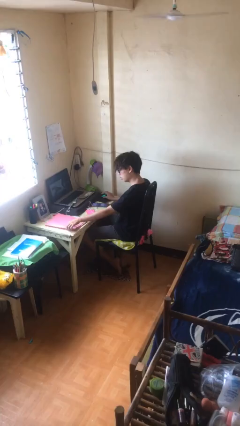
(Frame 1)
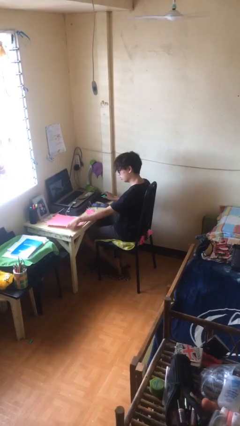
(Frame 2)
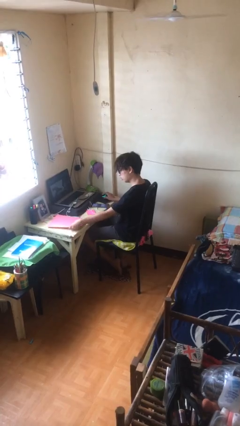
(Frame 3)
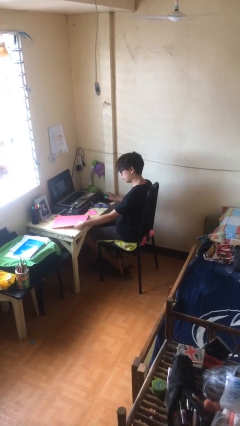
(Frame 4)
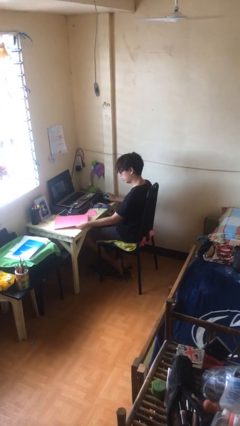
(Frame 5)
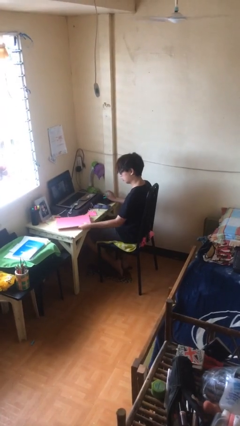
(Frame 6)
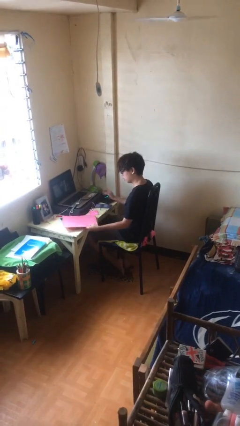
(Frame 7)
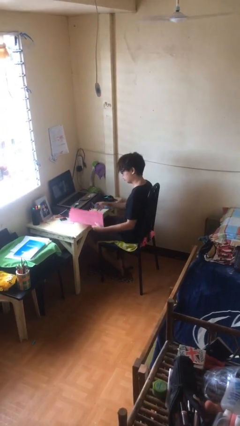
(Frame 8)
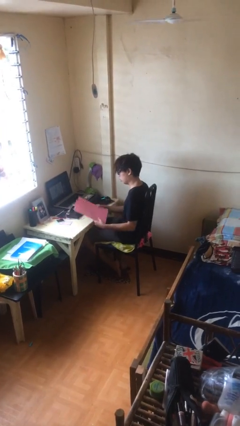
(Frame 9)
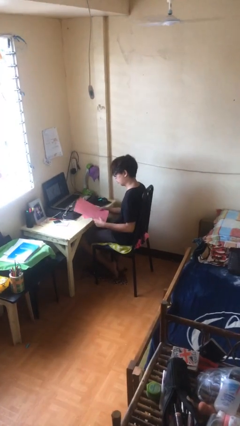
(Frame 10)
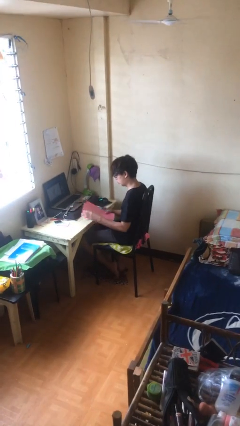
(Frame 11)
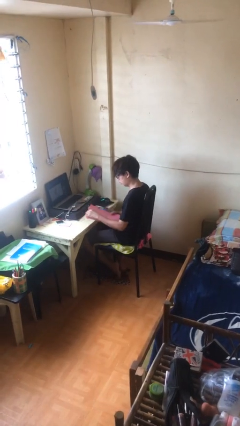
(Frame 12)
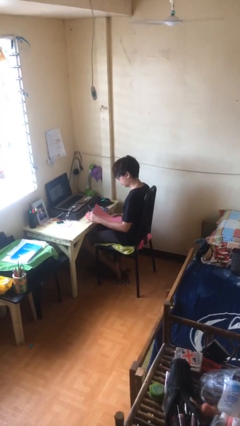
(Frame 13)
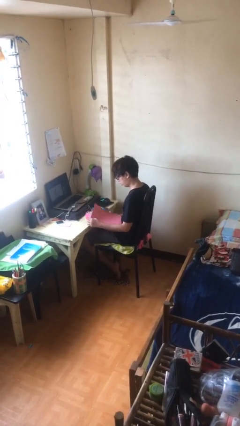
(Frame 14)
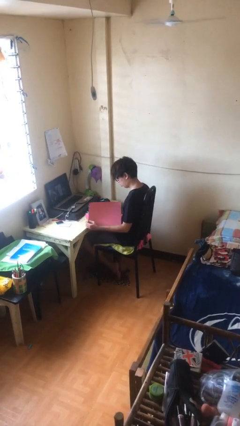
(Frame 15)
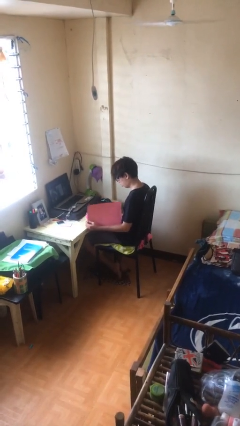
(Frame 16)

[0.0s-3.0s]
person picks up object from table

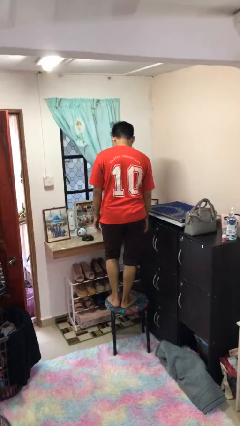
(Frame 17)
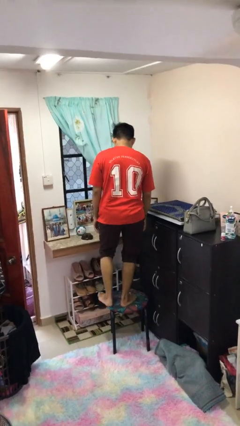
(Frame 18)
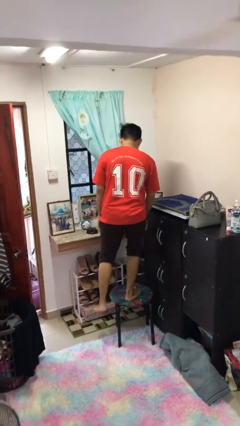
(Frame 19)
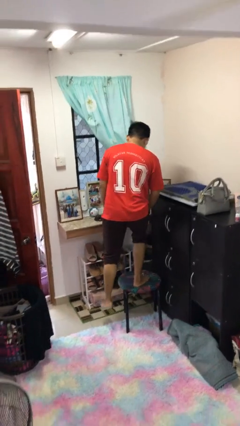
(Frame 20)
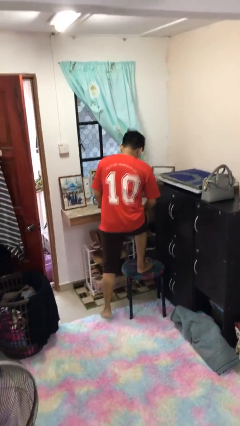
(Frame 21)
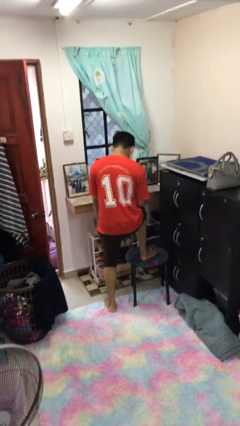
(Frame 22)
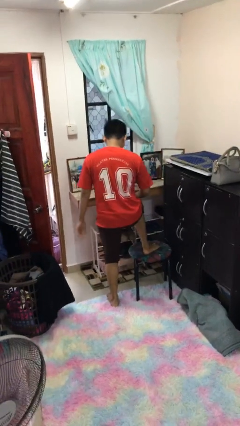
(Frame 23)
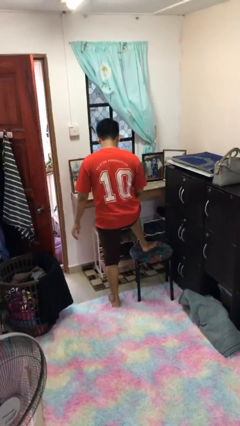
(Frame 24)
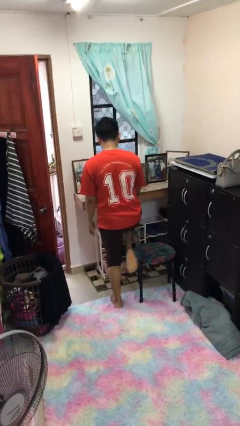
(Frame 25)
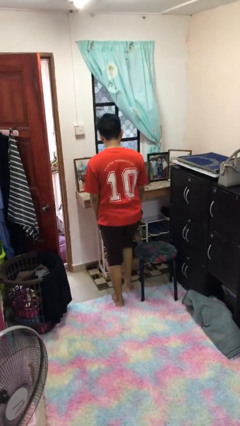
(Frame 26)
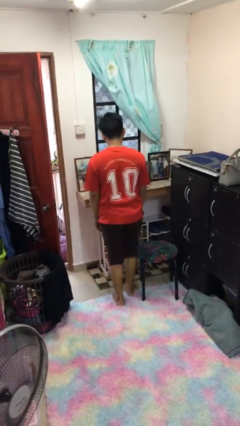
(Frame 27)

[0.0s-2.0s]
person climbs off chair

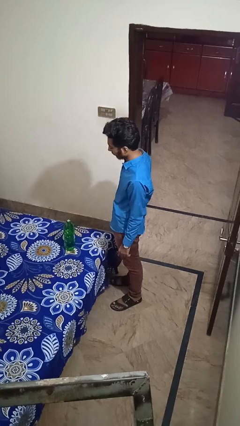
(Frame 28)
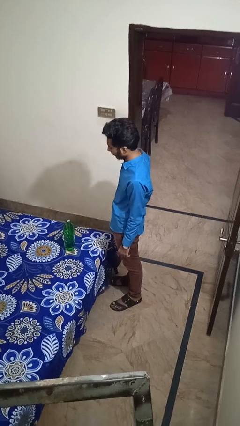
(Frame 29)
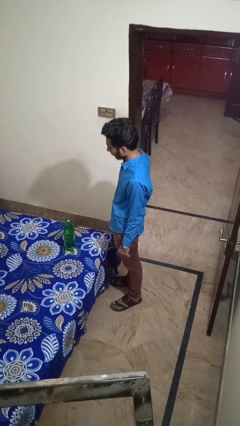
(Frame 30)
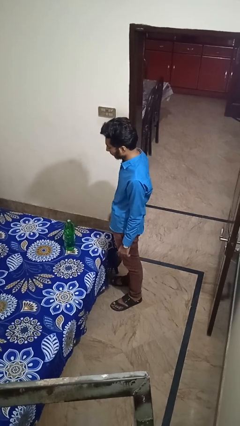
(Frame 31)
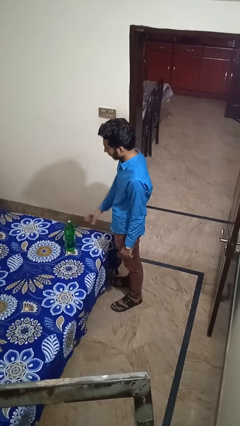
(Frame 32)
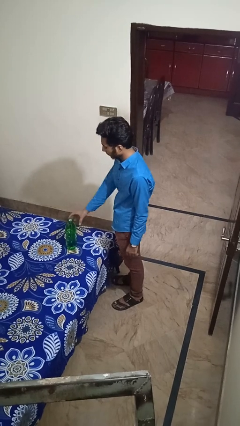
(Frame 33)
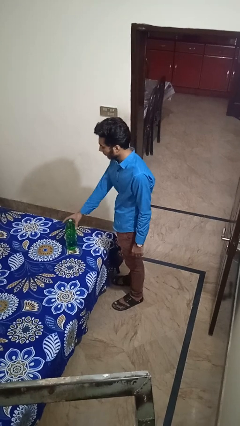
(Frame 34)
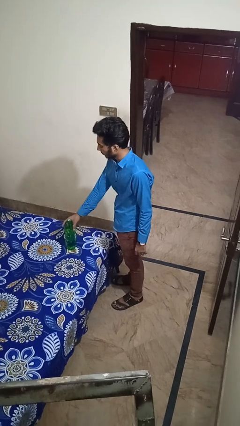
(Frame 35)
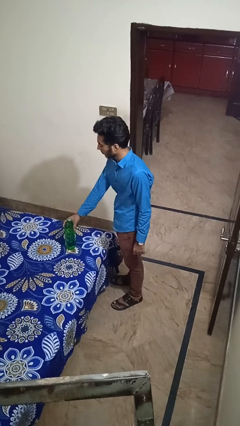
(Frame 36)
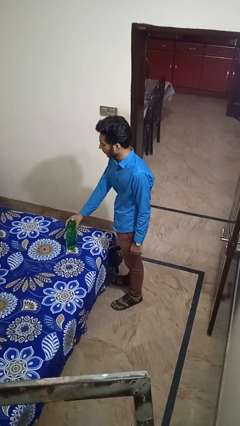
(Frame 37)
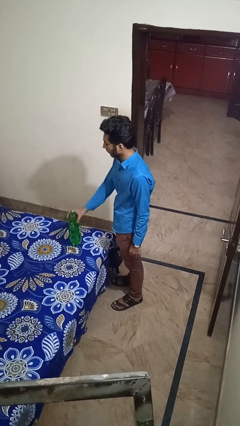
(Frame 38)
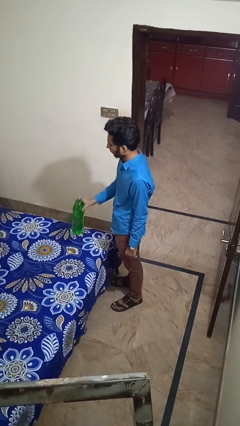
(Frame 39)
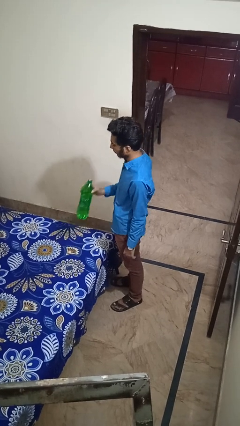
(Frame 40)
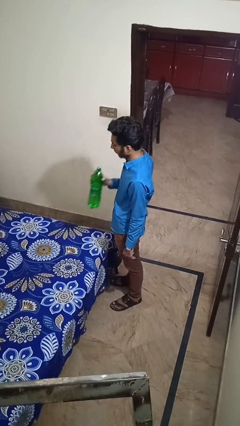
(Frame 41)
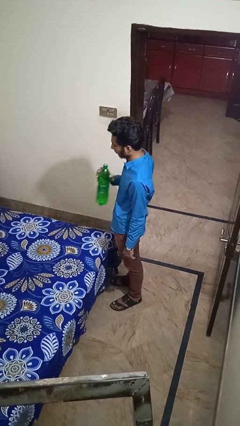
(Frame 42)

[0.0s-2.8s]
person picks up object from bed

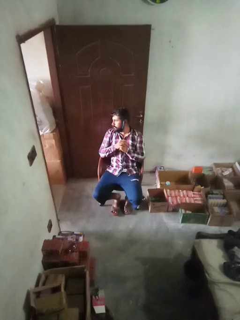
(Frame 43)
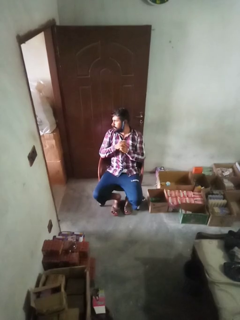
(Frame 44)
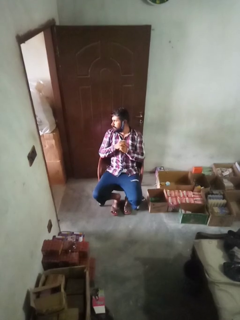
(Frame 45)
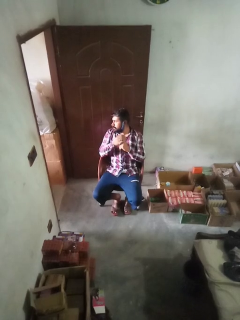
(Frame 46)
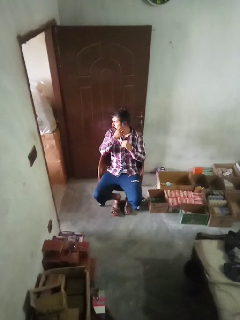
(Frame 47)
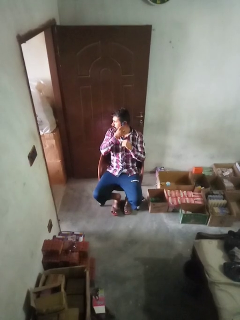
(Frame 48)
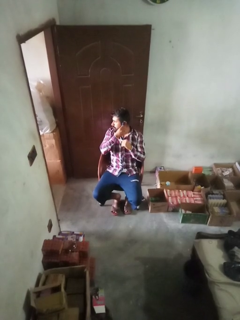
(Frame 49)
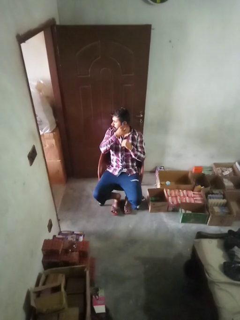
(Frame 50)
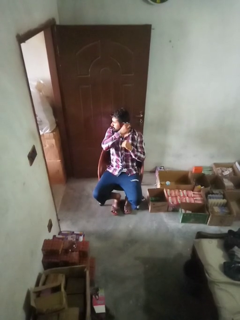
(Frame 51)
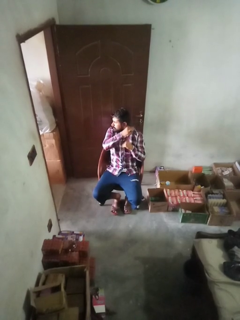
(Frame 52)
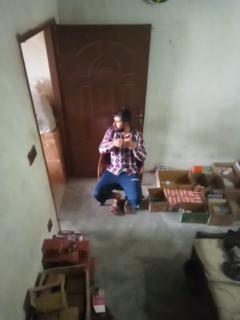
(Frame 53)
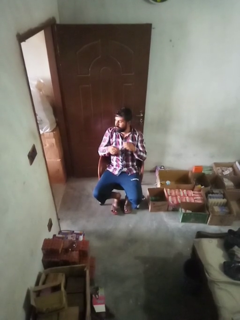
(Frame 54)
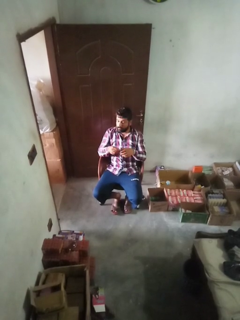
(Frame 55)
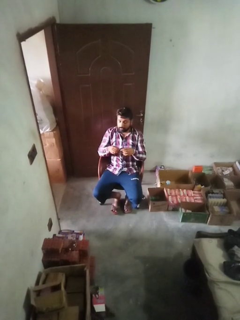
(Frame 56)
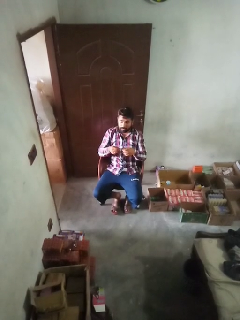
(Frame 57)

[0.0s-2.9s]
person takes off earrings

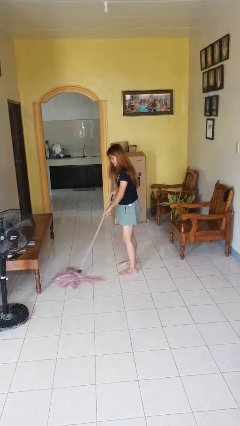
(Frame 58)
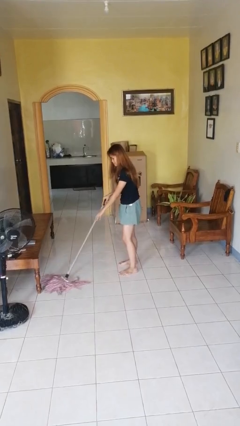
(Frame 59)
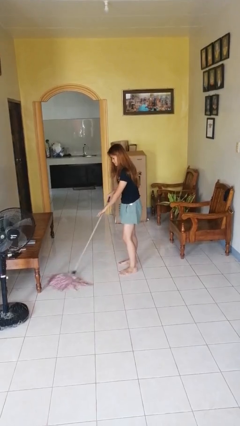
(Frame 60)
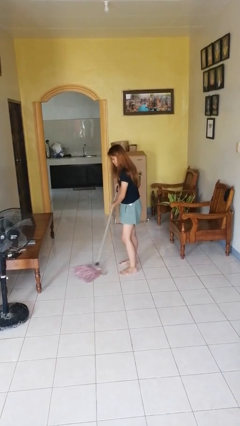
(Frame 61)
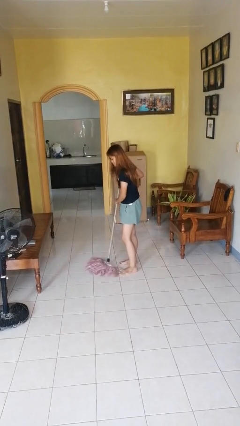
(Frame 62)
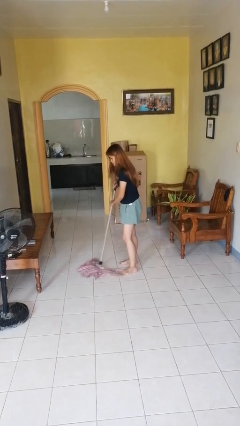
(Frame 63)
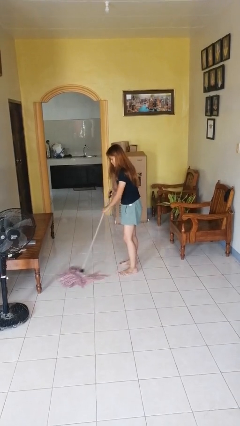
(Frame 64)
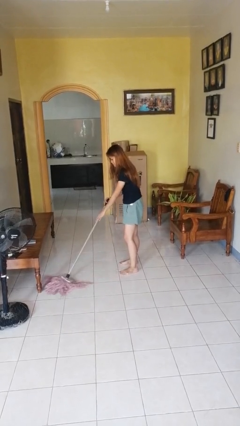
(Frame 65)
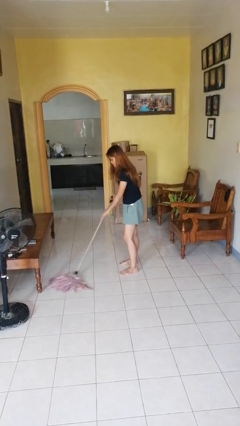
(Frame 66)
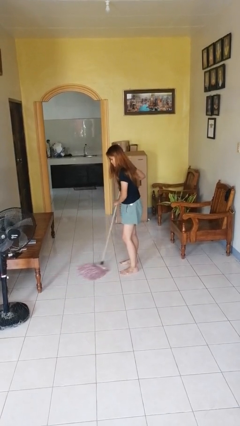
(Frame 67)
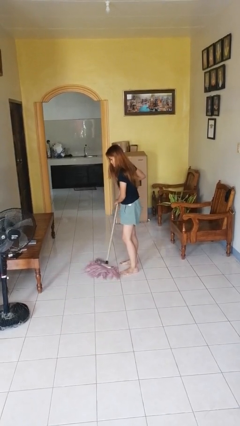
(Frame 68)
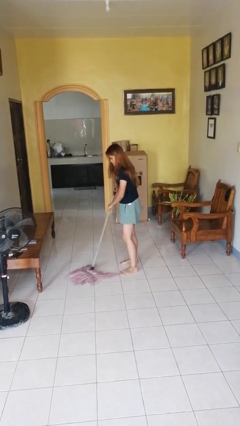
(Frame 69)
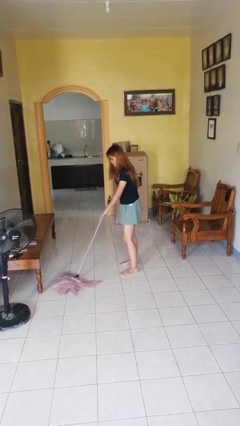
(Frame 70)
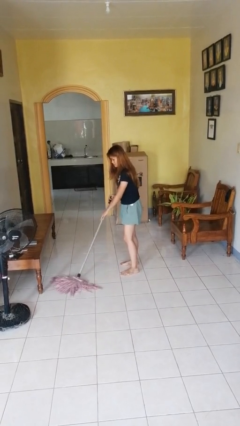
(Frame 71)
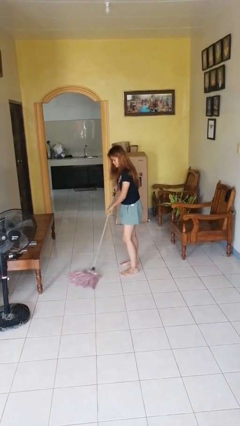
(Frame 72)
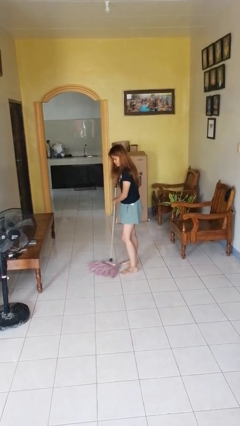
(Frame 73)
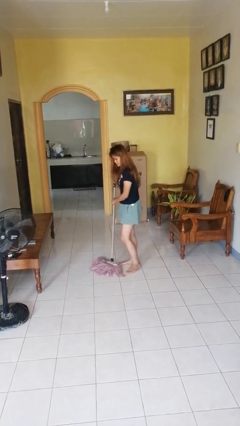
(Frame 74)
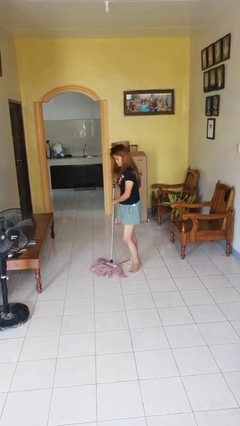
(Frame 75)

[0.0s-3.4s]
person mops

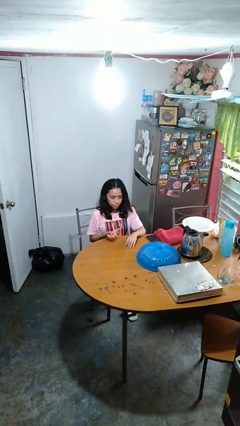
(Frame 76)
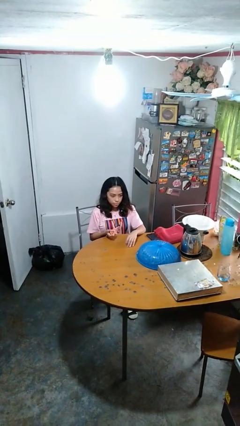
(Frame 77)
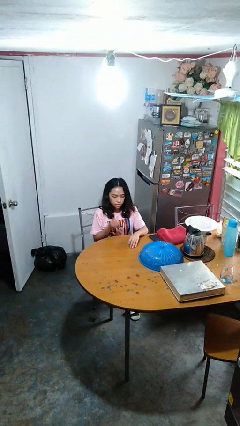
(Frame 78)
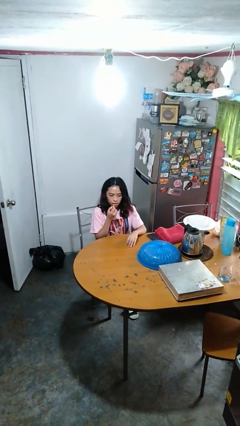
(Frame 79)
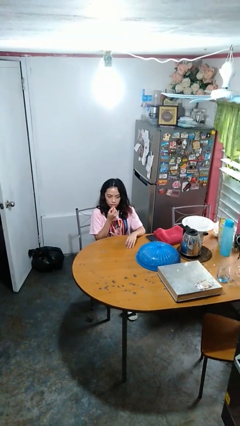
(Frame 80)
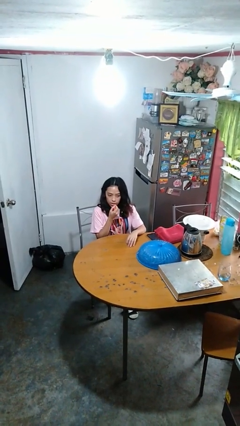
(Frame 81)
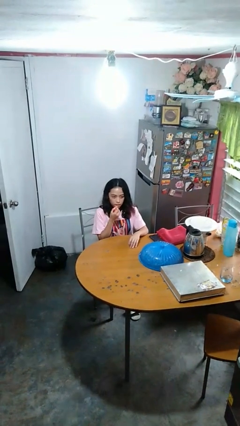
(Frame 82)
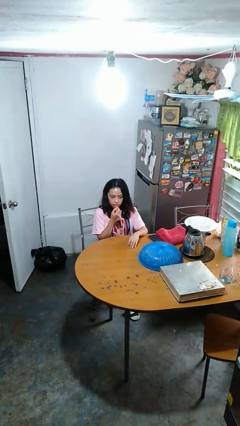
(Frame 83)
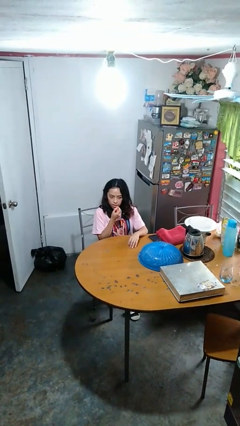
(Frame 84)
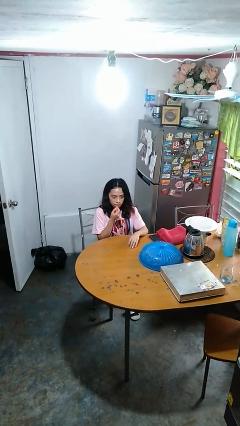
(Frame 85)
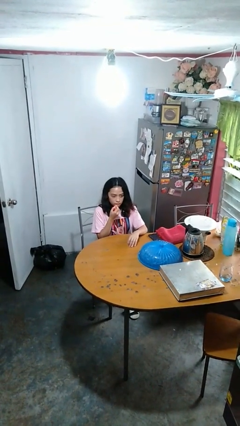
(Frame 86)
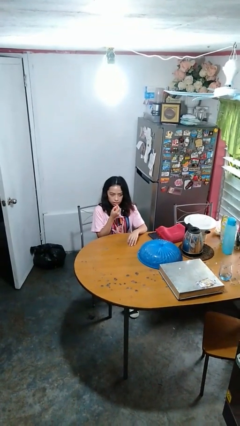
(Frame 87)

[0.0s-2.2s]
person applies lip makeup

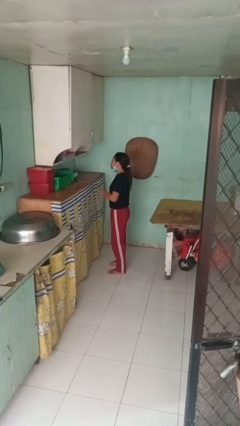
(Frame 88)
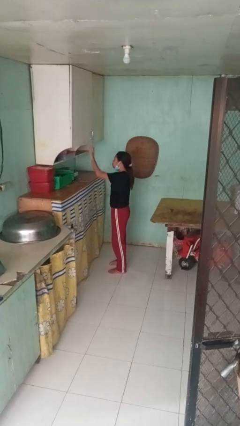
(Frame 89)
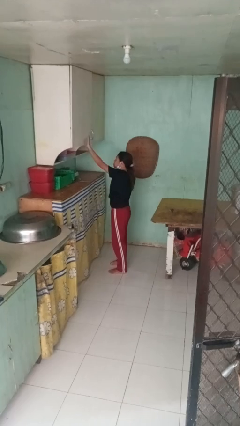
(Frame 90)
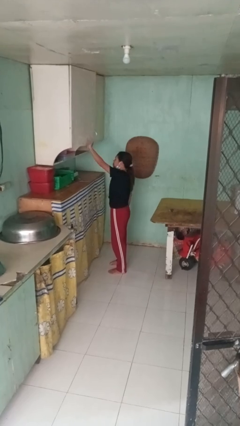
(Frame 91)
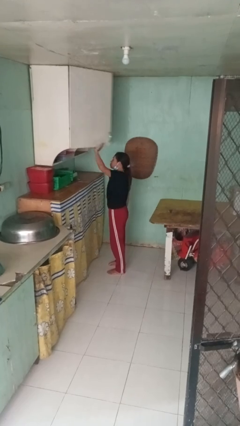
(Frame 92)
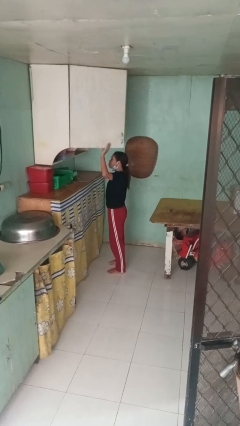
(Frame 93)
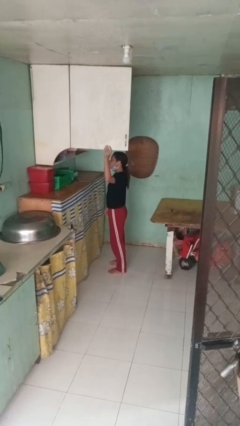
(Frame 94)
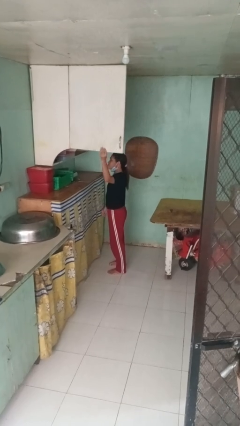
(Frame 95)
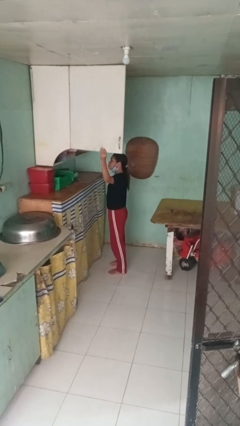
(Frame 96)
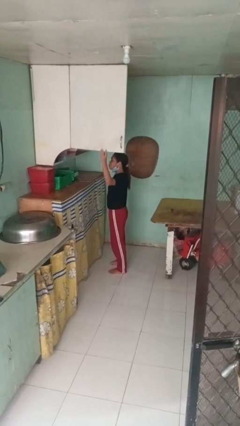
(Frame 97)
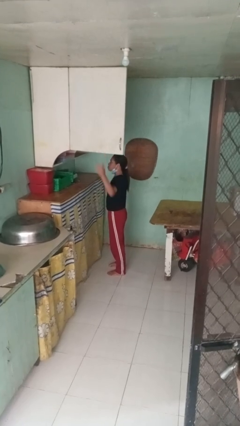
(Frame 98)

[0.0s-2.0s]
person opens cabinet
